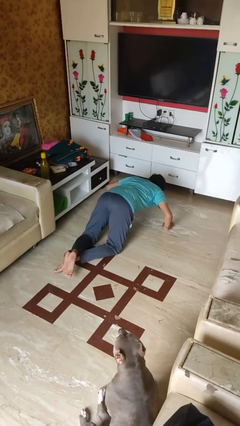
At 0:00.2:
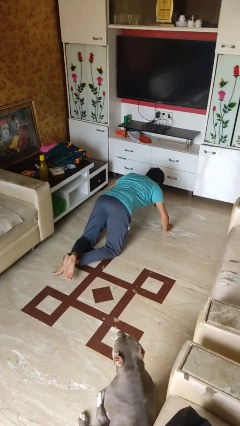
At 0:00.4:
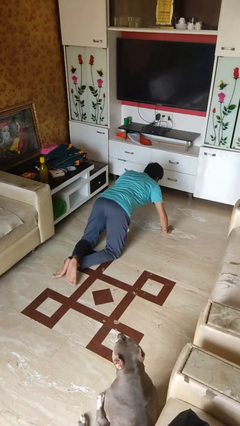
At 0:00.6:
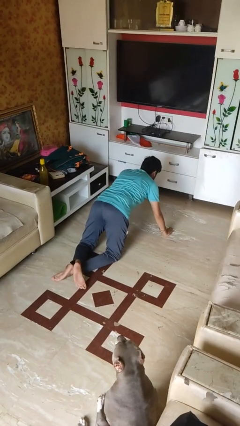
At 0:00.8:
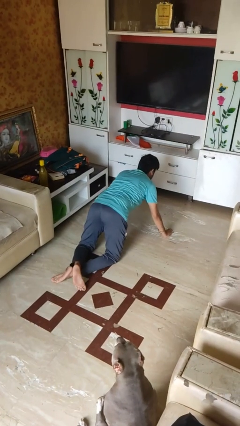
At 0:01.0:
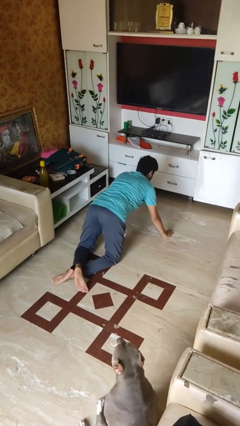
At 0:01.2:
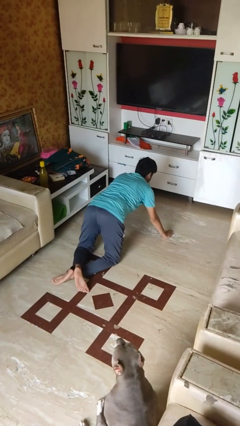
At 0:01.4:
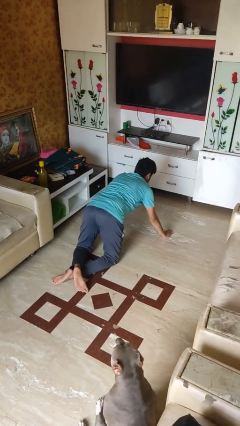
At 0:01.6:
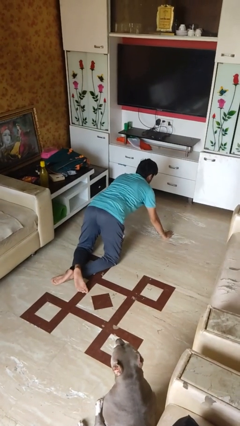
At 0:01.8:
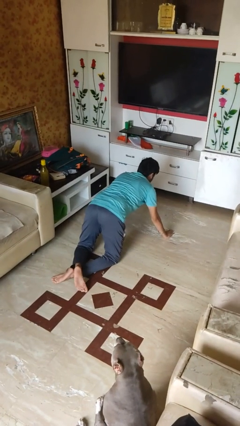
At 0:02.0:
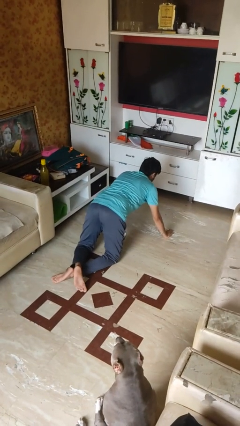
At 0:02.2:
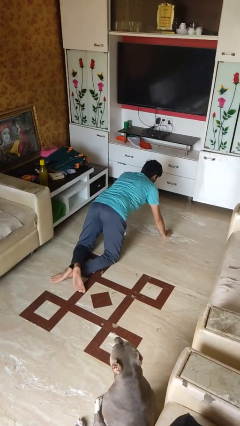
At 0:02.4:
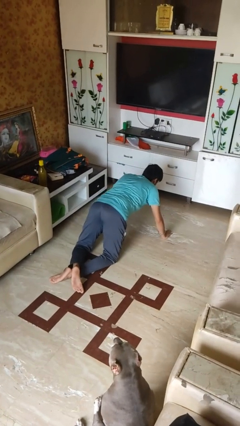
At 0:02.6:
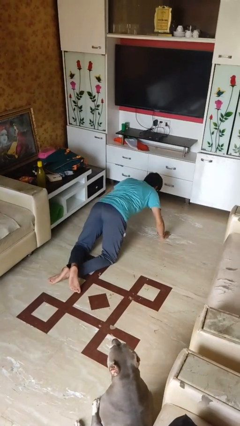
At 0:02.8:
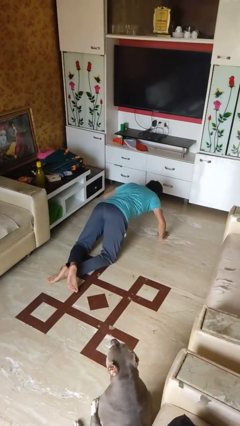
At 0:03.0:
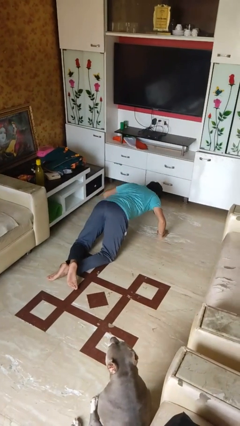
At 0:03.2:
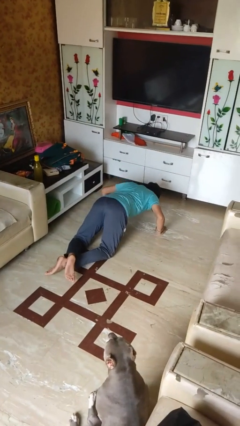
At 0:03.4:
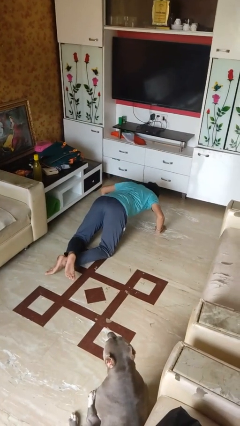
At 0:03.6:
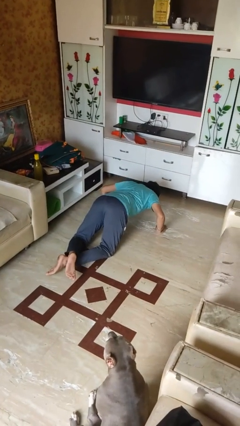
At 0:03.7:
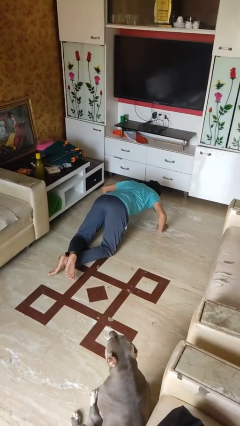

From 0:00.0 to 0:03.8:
person exercises with pushup

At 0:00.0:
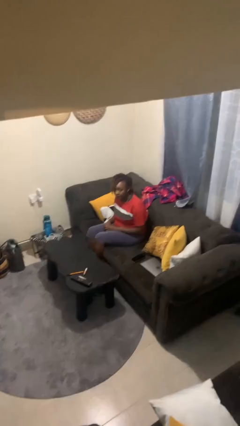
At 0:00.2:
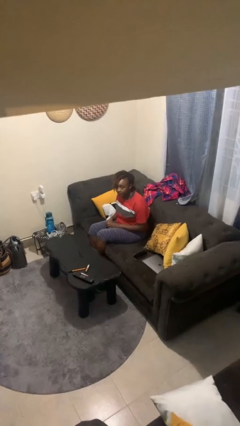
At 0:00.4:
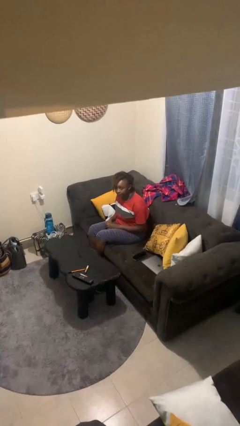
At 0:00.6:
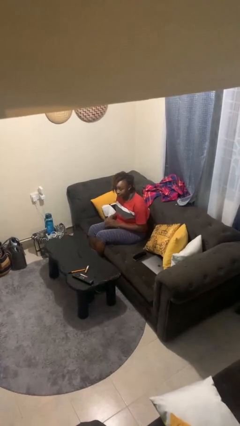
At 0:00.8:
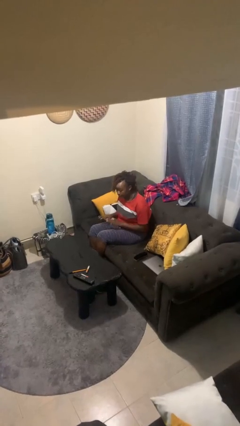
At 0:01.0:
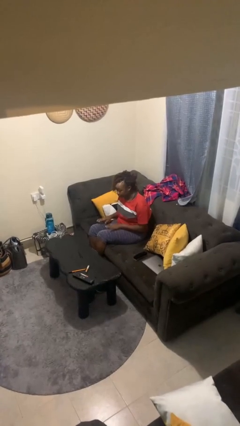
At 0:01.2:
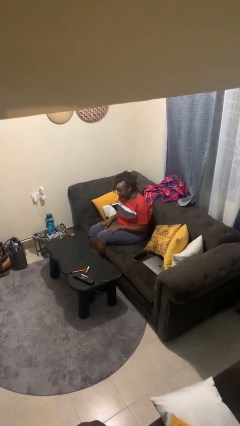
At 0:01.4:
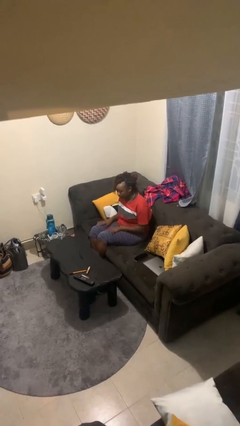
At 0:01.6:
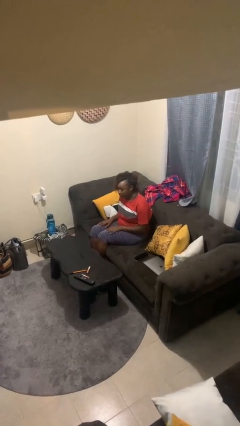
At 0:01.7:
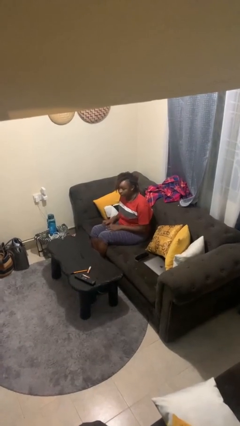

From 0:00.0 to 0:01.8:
person slaps hands on thighs

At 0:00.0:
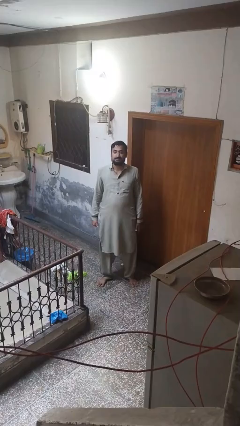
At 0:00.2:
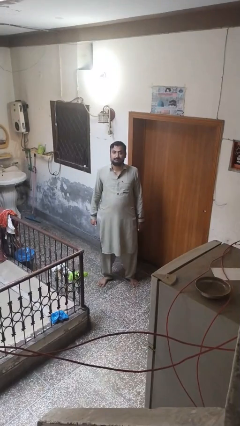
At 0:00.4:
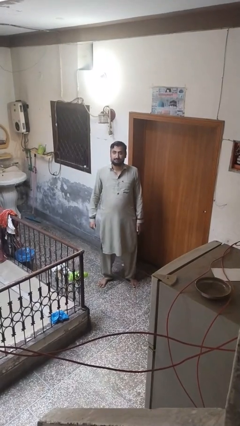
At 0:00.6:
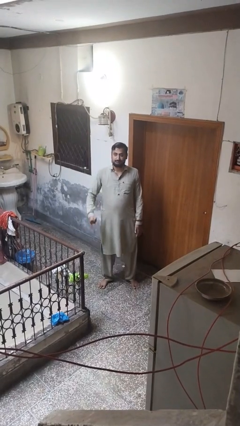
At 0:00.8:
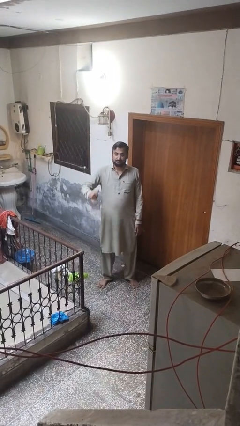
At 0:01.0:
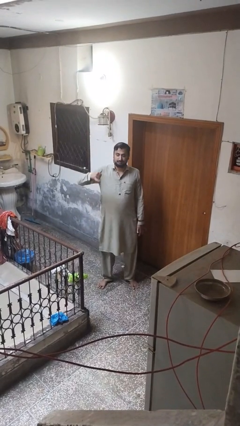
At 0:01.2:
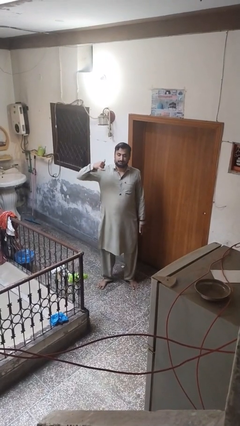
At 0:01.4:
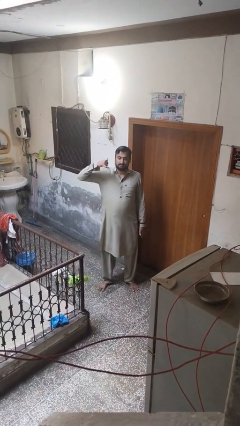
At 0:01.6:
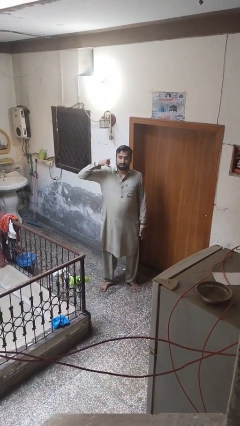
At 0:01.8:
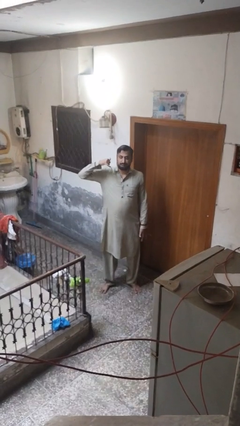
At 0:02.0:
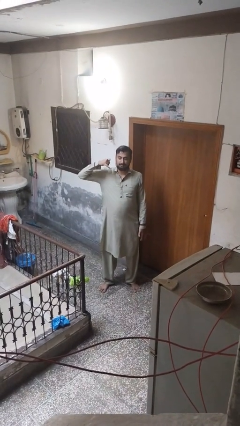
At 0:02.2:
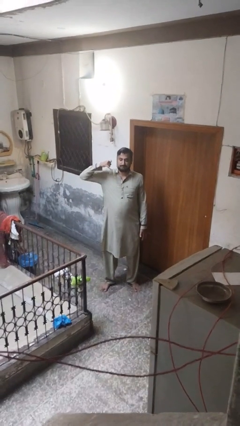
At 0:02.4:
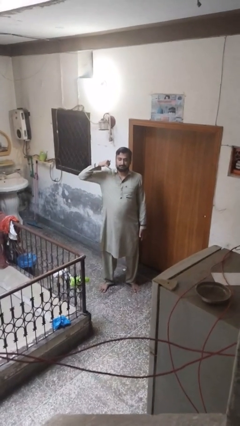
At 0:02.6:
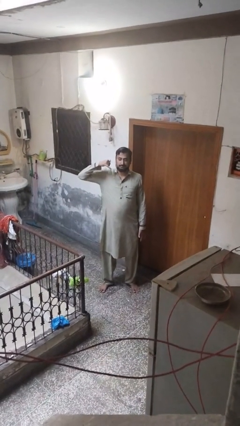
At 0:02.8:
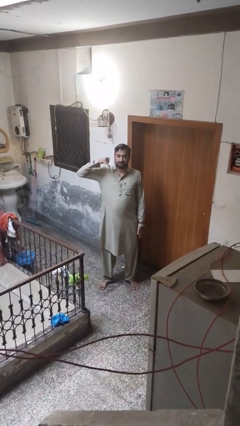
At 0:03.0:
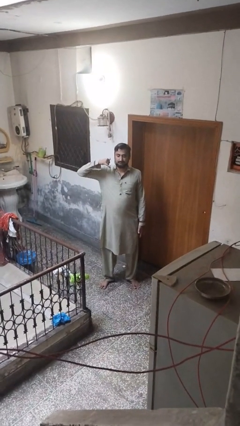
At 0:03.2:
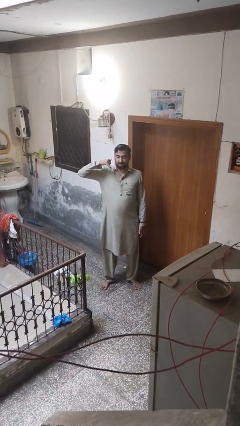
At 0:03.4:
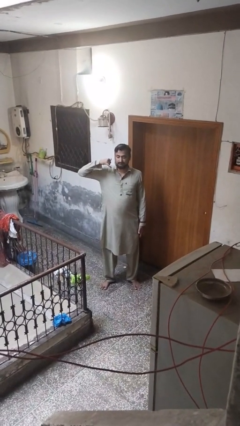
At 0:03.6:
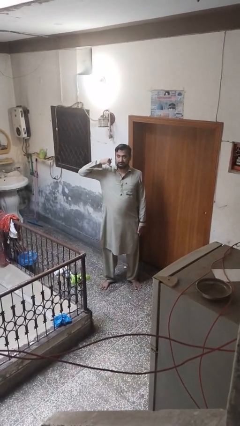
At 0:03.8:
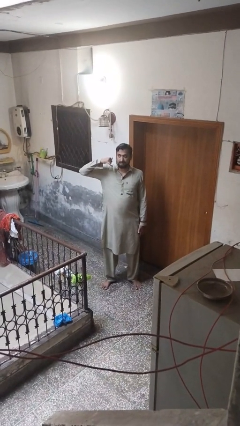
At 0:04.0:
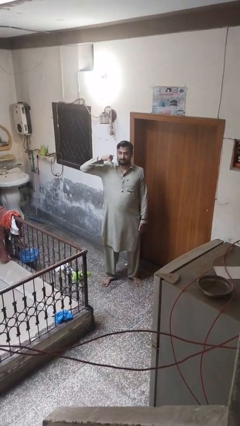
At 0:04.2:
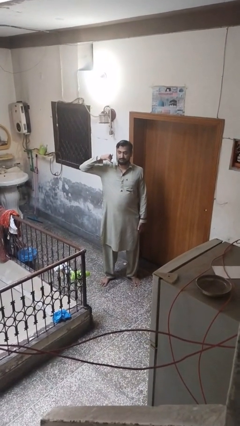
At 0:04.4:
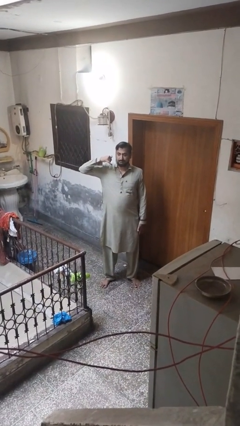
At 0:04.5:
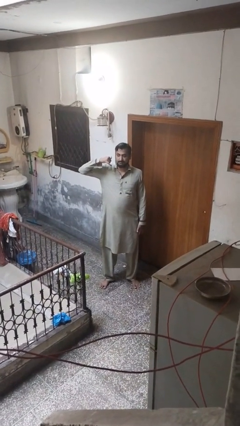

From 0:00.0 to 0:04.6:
person gestures call me

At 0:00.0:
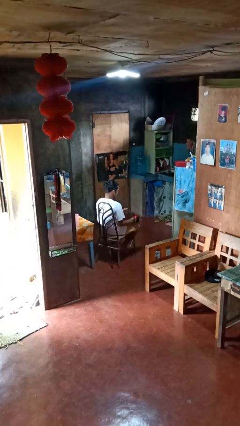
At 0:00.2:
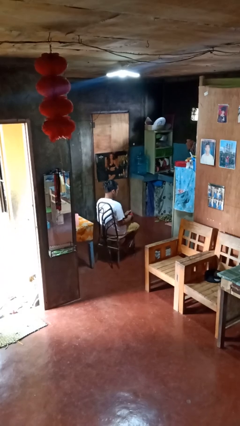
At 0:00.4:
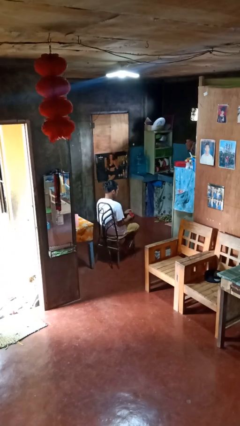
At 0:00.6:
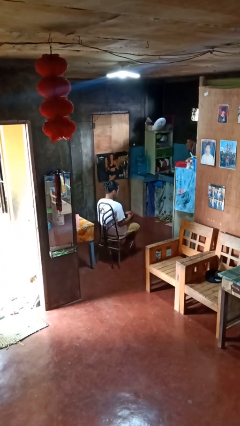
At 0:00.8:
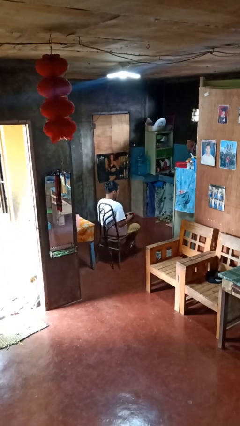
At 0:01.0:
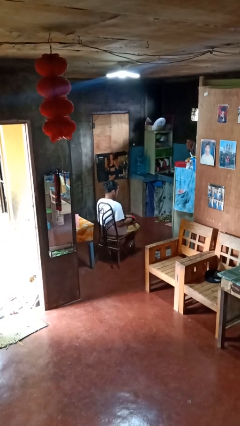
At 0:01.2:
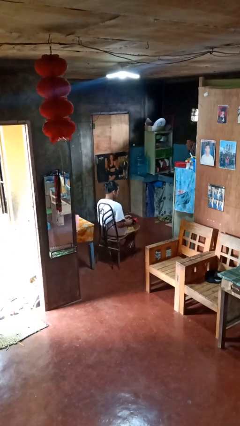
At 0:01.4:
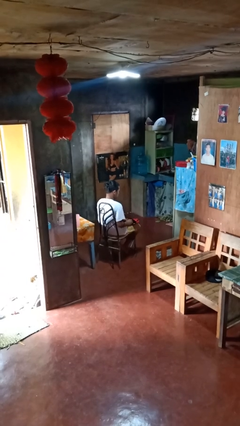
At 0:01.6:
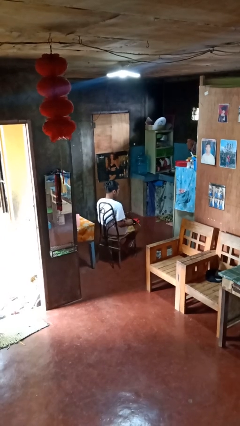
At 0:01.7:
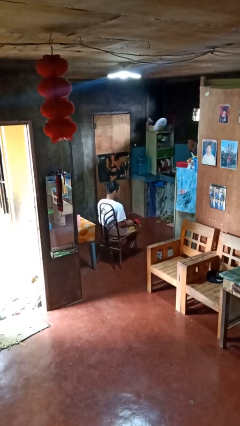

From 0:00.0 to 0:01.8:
person takes off gloves

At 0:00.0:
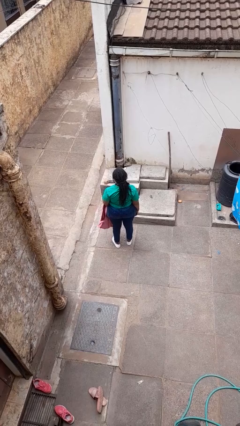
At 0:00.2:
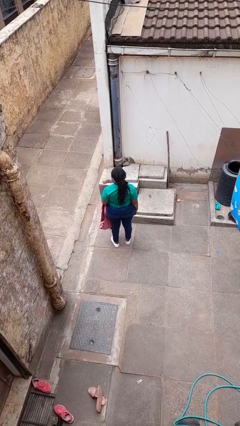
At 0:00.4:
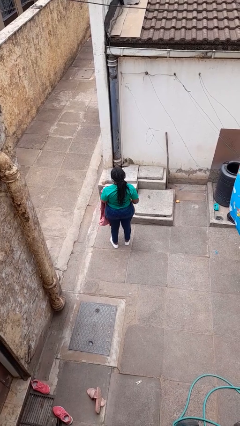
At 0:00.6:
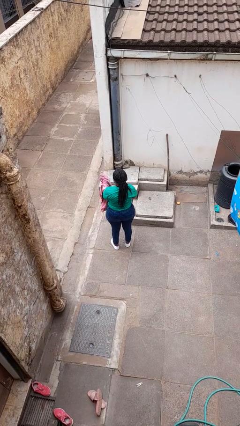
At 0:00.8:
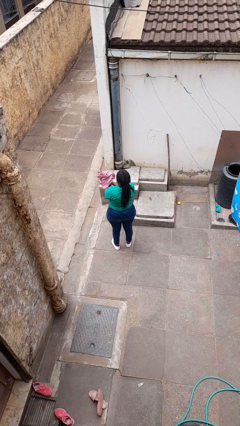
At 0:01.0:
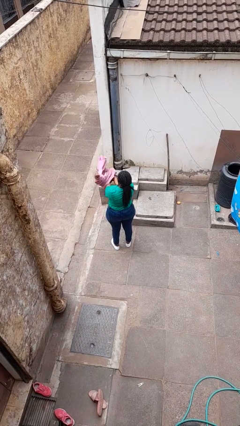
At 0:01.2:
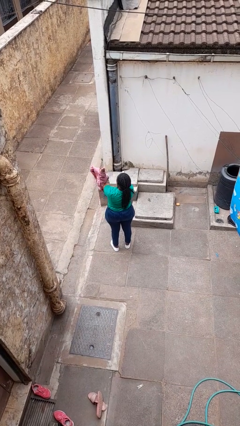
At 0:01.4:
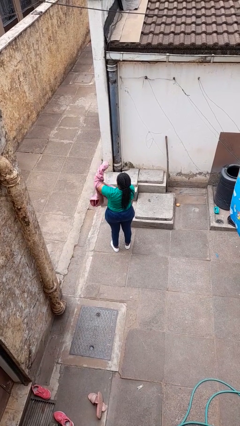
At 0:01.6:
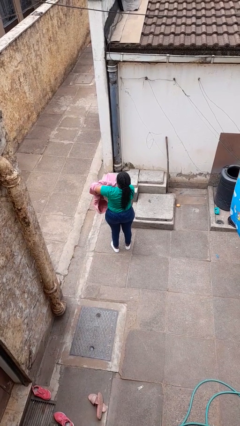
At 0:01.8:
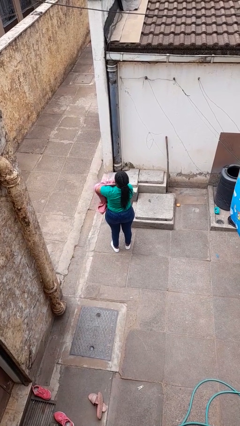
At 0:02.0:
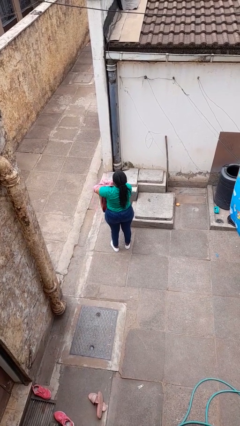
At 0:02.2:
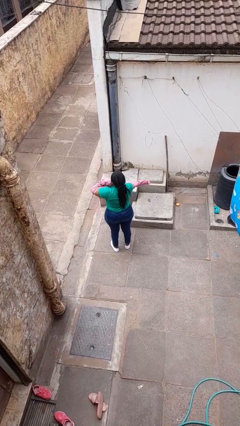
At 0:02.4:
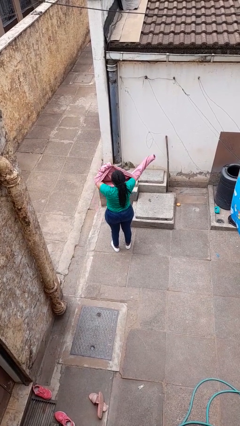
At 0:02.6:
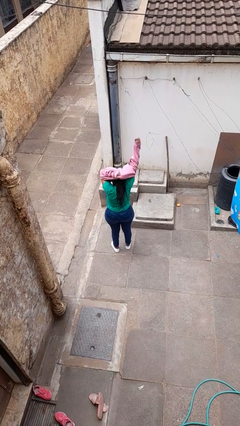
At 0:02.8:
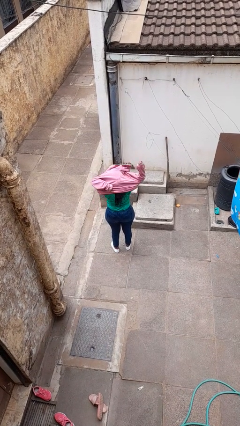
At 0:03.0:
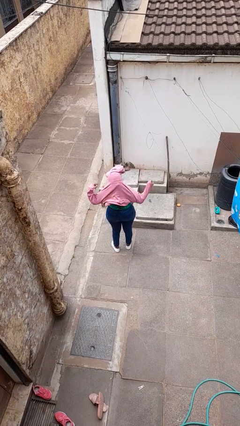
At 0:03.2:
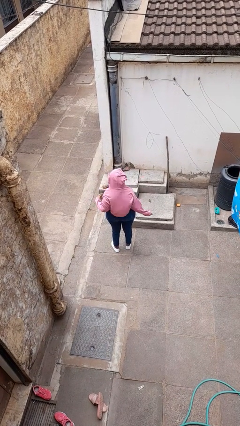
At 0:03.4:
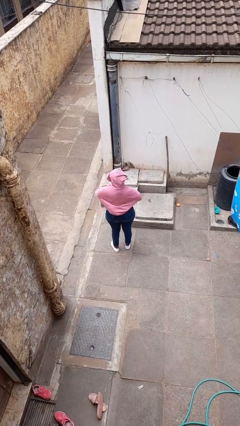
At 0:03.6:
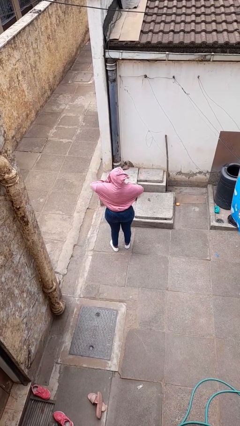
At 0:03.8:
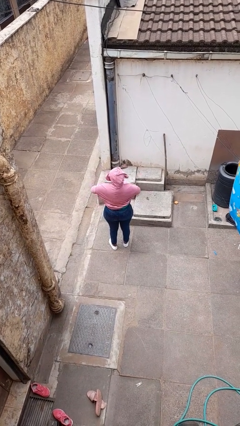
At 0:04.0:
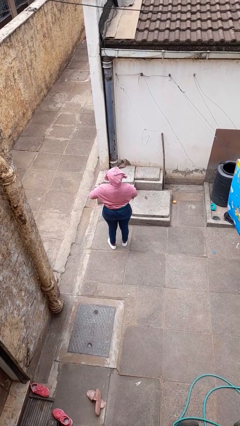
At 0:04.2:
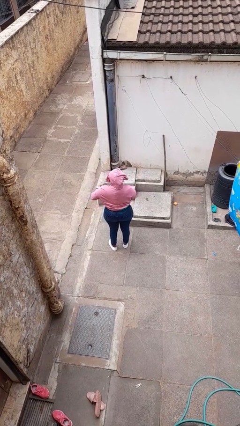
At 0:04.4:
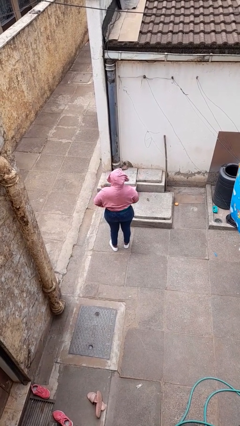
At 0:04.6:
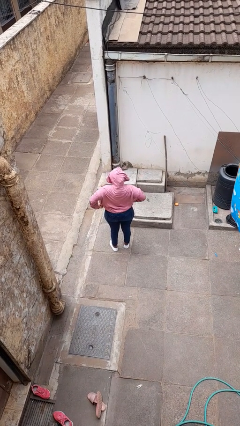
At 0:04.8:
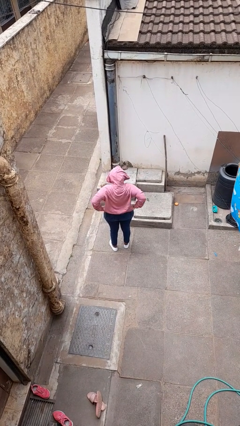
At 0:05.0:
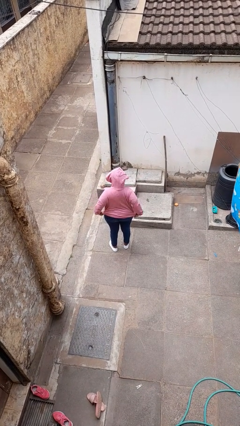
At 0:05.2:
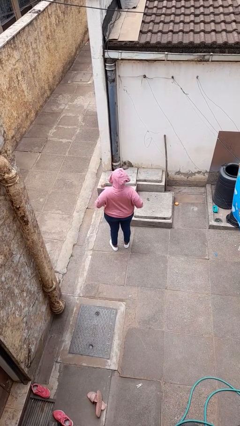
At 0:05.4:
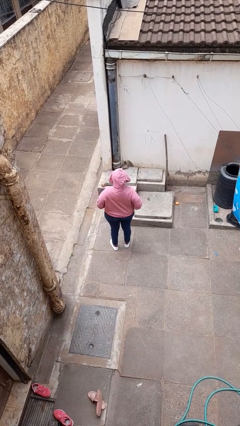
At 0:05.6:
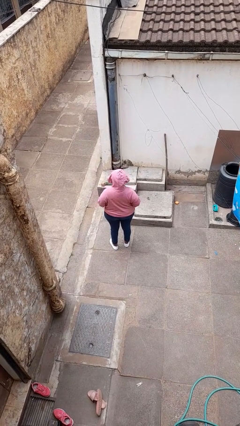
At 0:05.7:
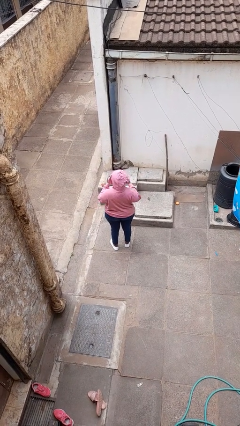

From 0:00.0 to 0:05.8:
person puts on hoodie
